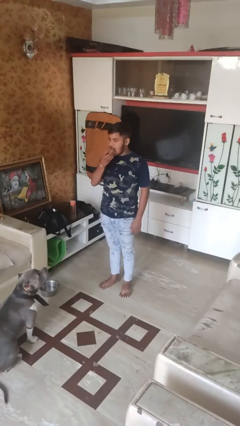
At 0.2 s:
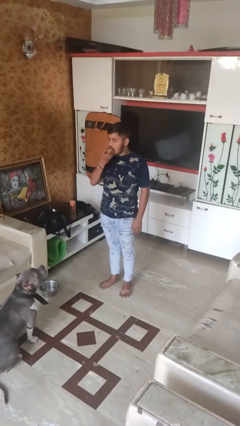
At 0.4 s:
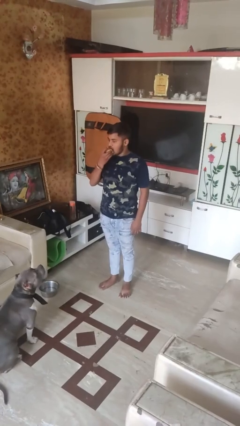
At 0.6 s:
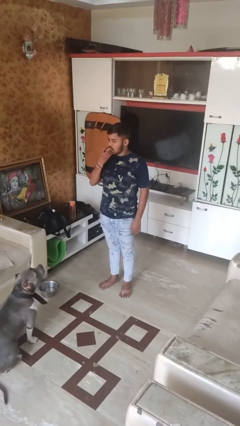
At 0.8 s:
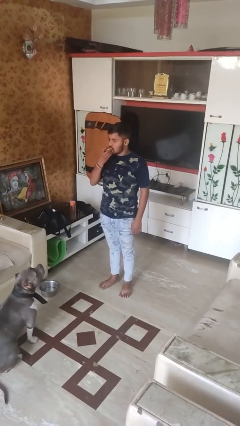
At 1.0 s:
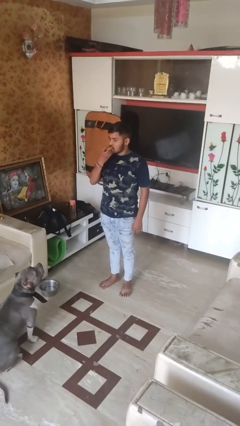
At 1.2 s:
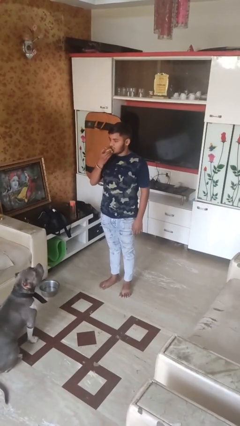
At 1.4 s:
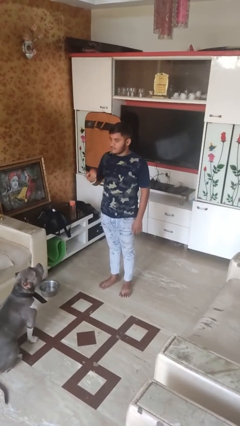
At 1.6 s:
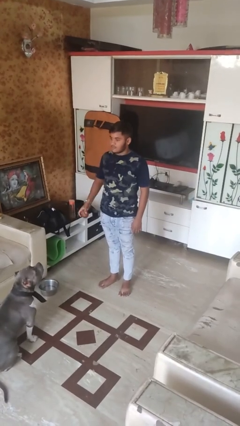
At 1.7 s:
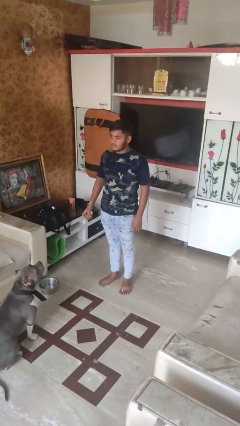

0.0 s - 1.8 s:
person eats apple

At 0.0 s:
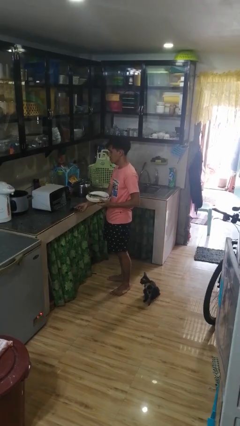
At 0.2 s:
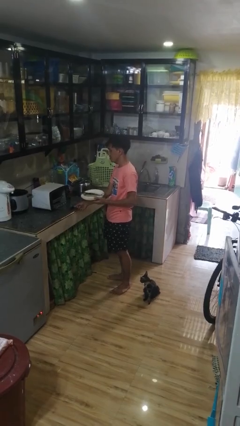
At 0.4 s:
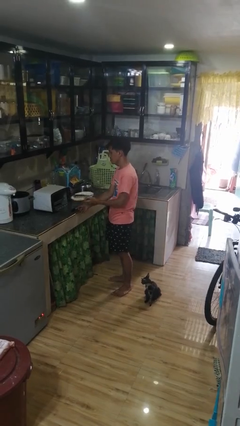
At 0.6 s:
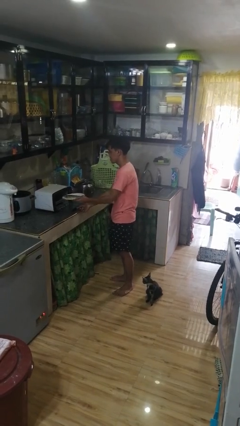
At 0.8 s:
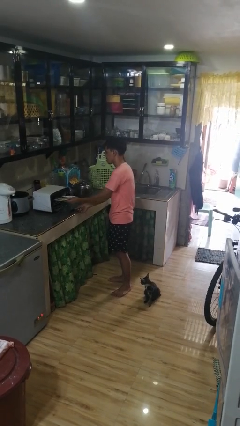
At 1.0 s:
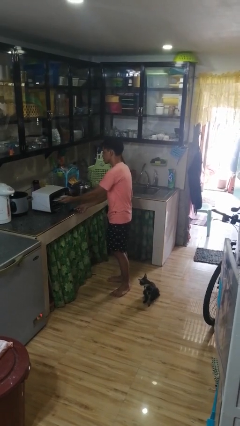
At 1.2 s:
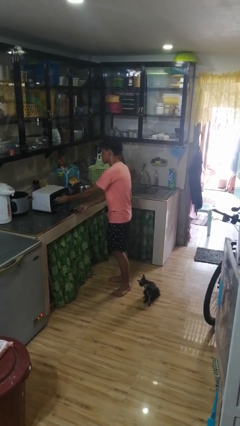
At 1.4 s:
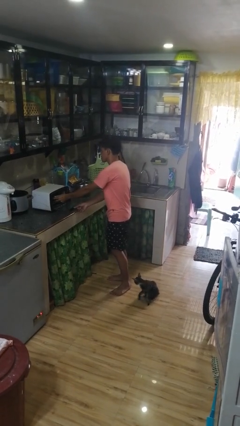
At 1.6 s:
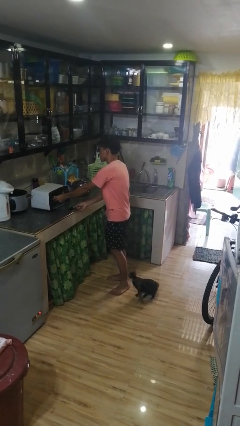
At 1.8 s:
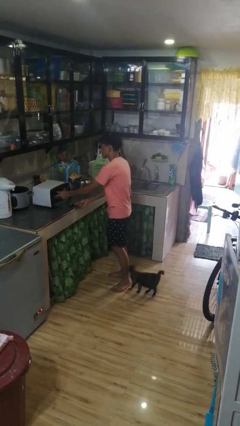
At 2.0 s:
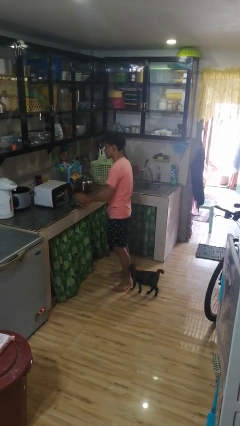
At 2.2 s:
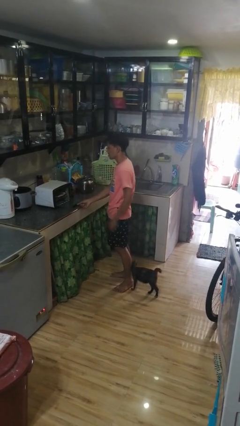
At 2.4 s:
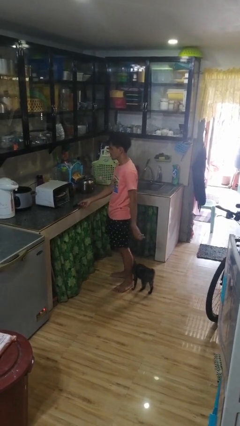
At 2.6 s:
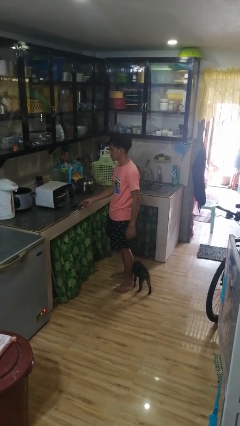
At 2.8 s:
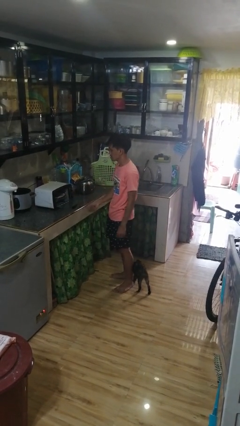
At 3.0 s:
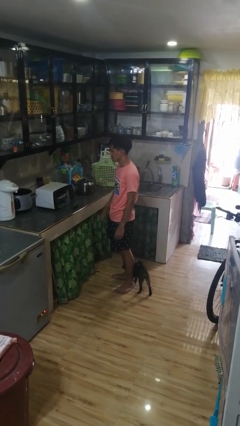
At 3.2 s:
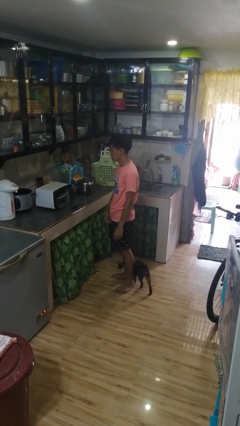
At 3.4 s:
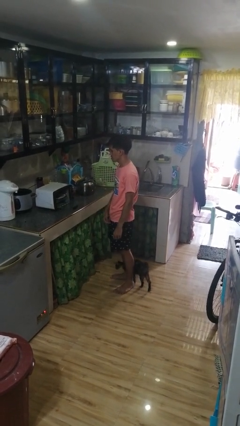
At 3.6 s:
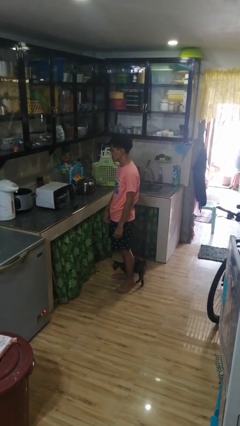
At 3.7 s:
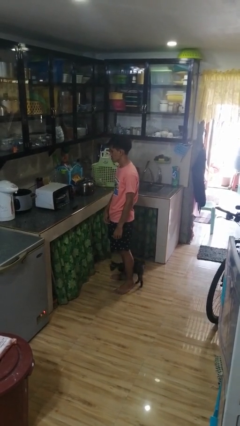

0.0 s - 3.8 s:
person puts object into microwave

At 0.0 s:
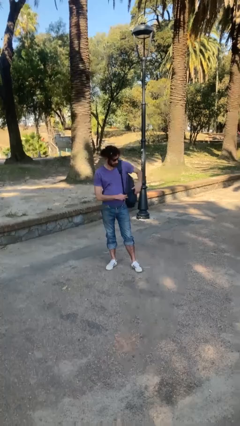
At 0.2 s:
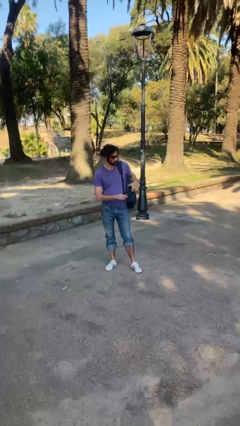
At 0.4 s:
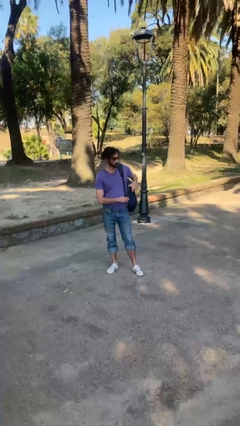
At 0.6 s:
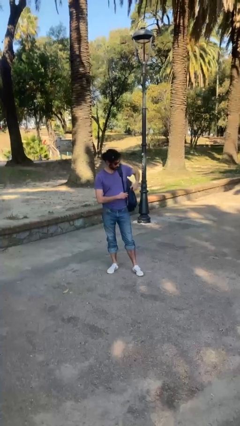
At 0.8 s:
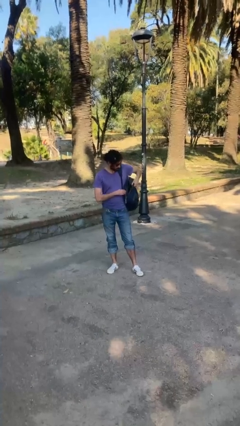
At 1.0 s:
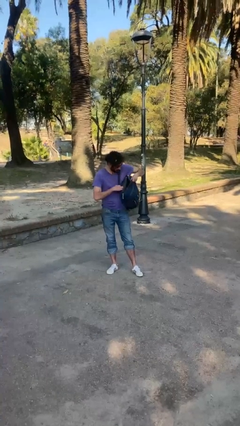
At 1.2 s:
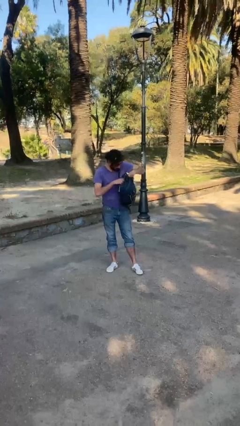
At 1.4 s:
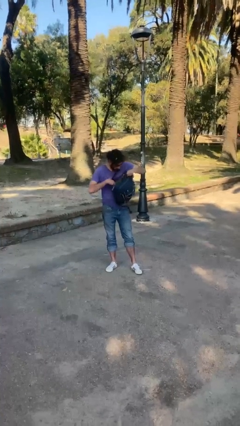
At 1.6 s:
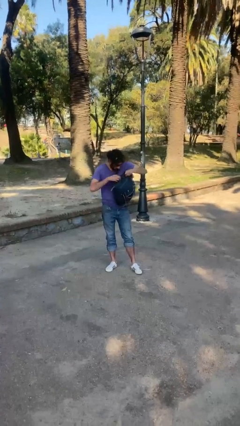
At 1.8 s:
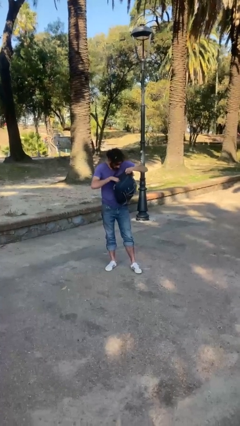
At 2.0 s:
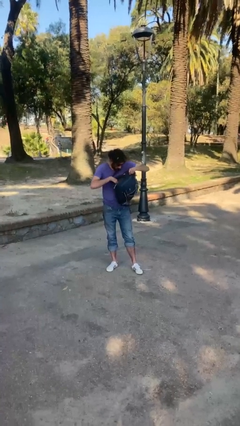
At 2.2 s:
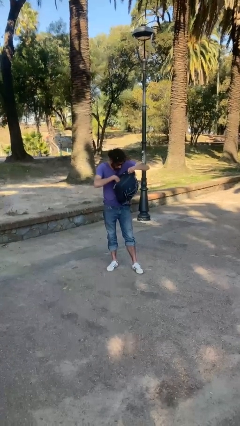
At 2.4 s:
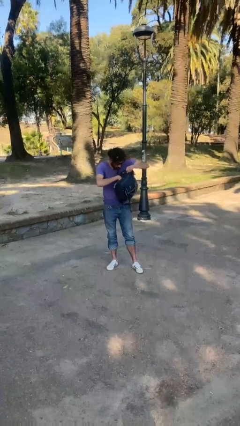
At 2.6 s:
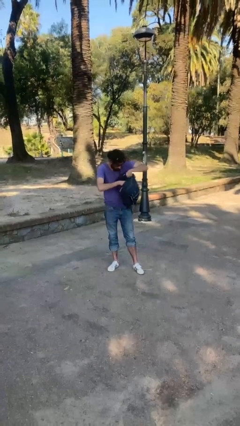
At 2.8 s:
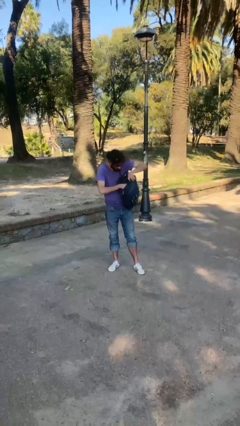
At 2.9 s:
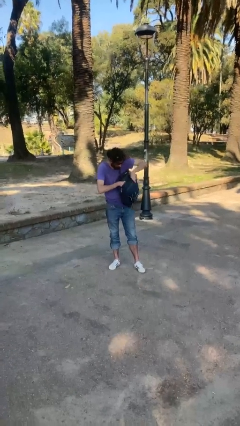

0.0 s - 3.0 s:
person searches in backpack

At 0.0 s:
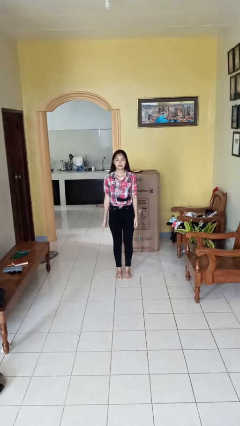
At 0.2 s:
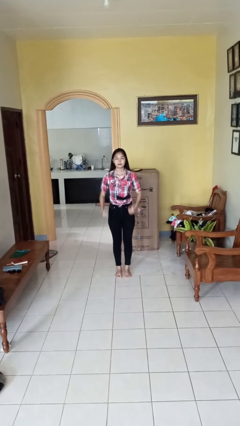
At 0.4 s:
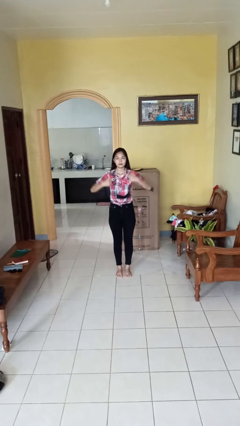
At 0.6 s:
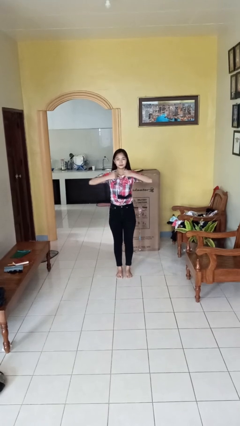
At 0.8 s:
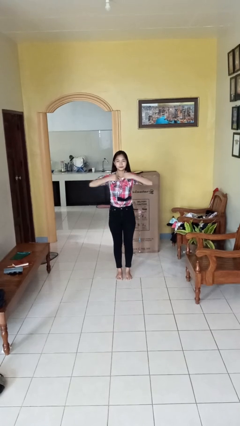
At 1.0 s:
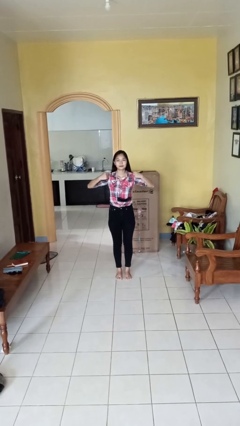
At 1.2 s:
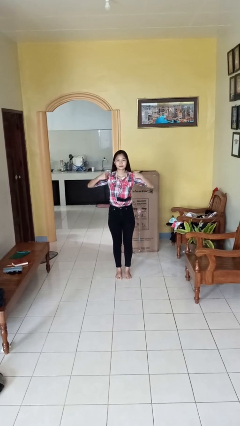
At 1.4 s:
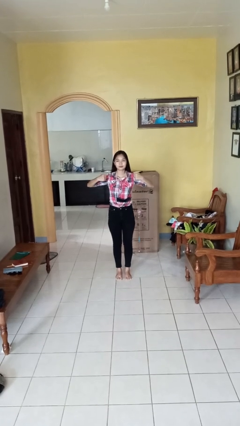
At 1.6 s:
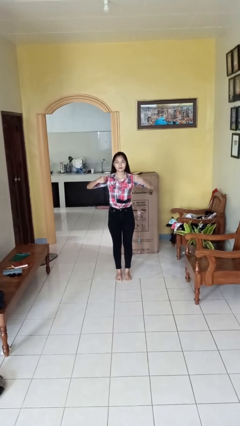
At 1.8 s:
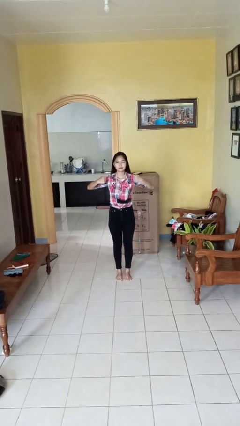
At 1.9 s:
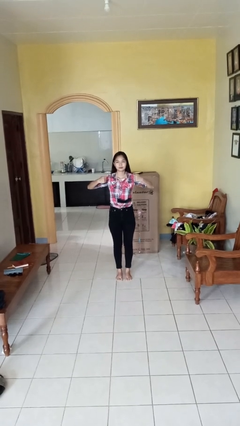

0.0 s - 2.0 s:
person gestures zoom in

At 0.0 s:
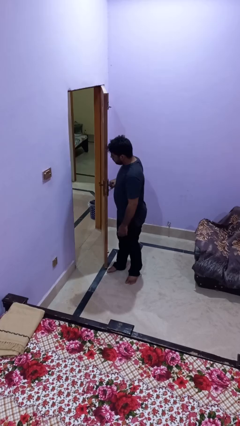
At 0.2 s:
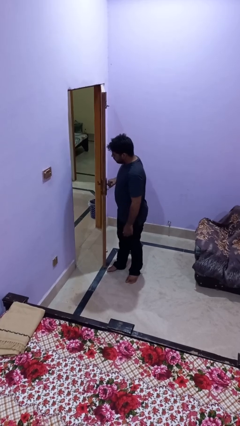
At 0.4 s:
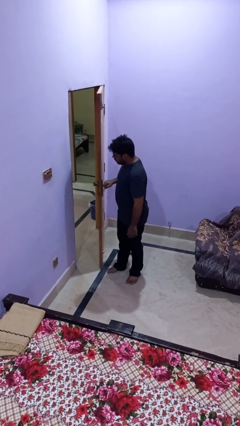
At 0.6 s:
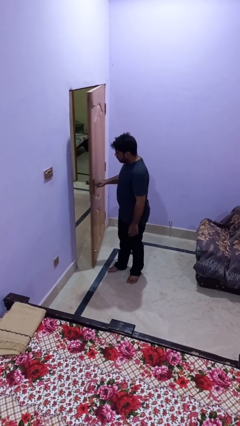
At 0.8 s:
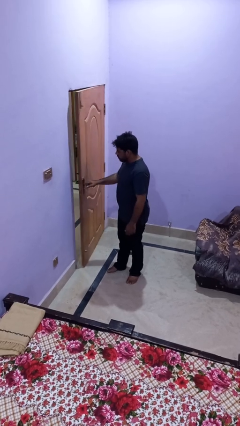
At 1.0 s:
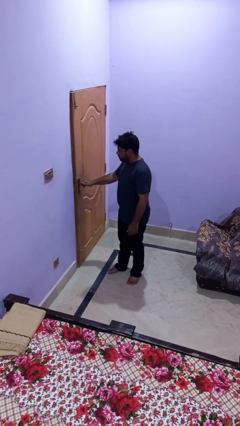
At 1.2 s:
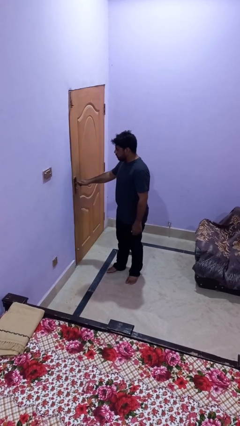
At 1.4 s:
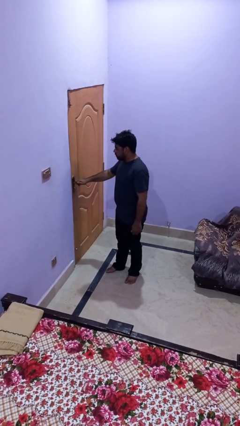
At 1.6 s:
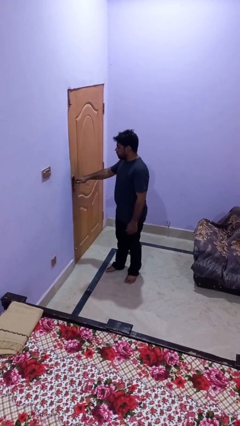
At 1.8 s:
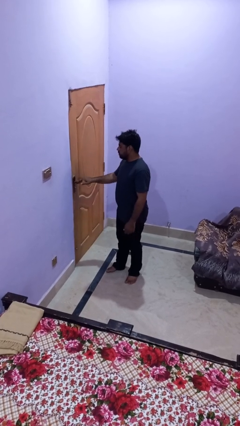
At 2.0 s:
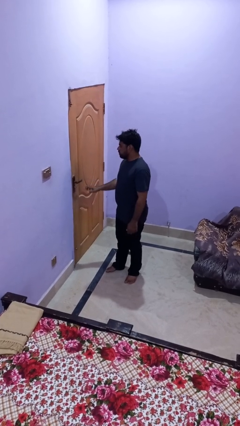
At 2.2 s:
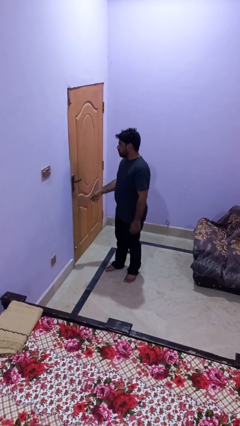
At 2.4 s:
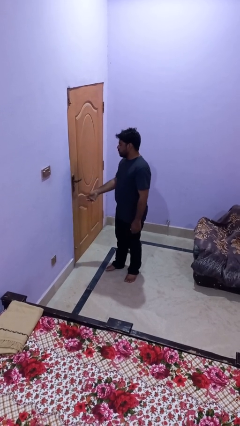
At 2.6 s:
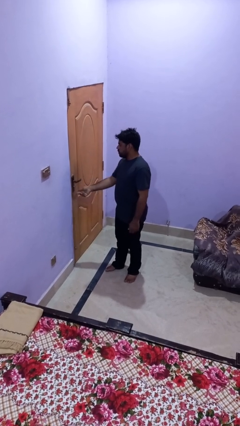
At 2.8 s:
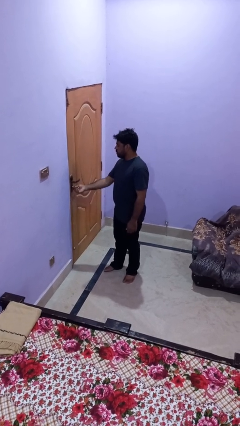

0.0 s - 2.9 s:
person closes facility door

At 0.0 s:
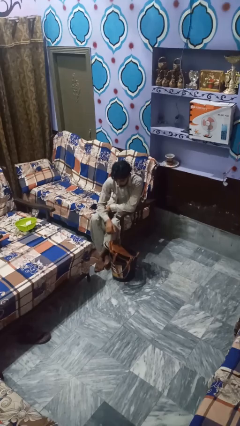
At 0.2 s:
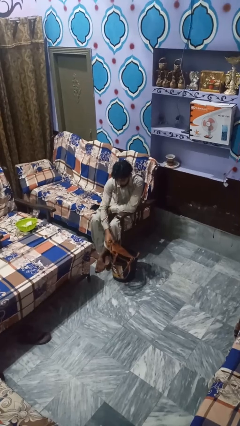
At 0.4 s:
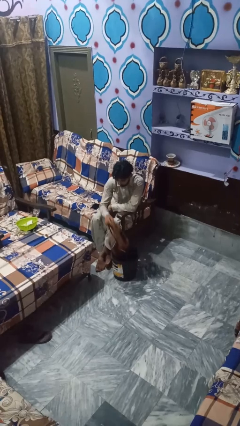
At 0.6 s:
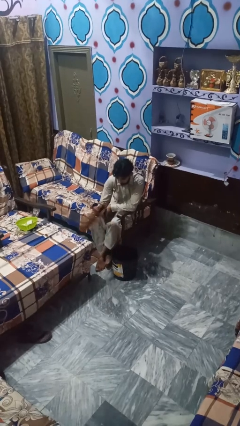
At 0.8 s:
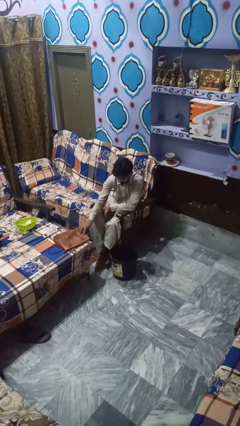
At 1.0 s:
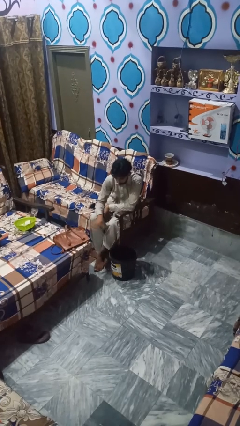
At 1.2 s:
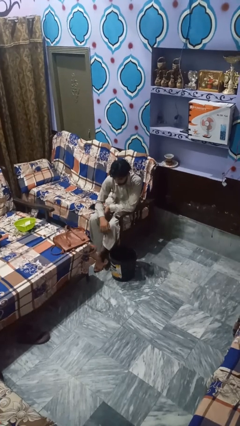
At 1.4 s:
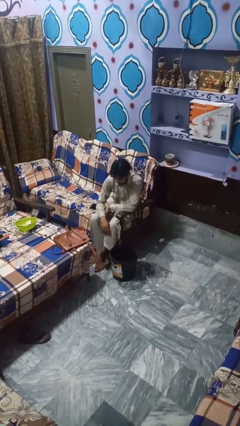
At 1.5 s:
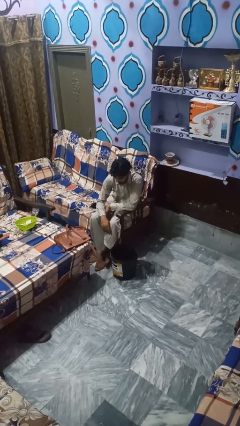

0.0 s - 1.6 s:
person takes object from basket

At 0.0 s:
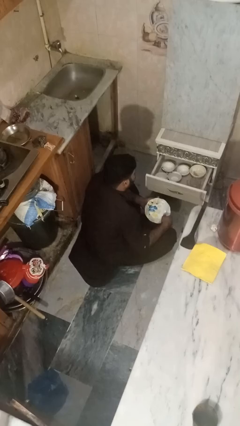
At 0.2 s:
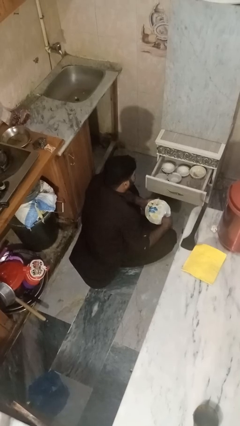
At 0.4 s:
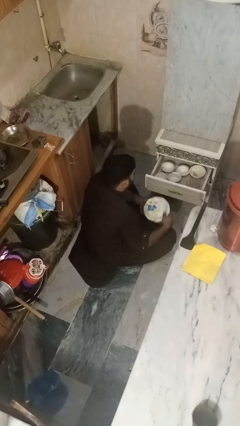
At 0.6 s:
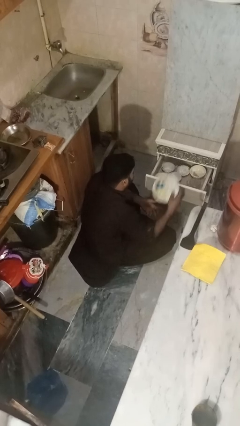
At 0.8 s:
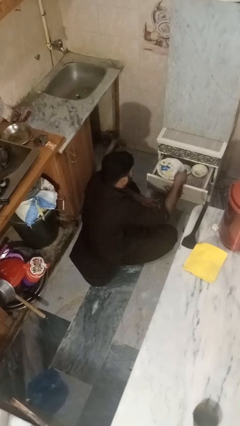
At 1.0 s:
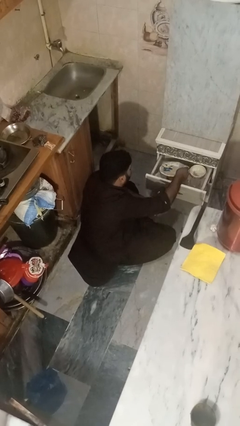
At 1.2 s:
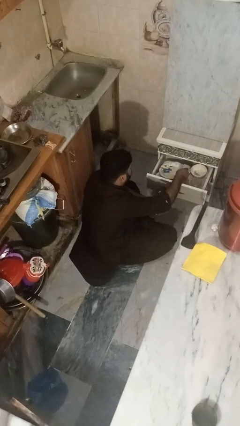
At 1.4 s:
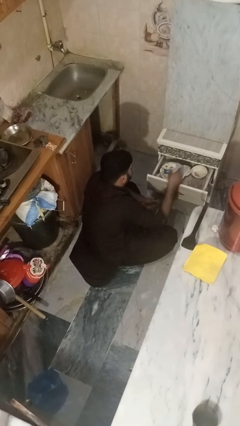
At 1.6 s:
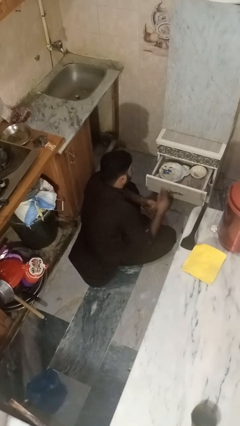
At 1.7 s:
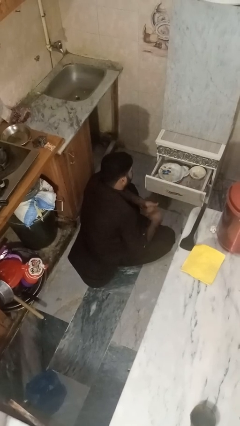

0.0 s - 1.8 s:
person puts object into kitchen drawer
